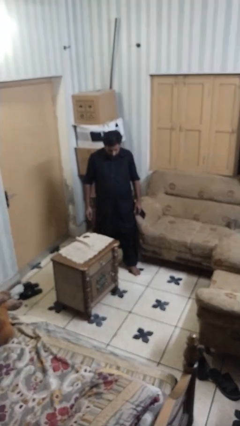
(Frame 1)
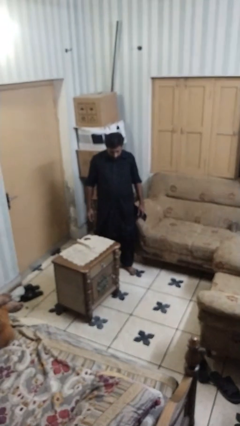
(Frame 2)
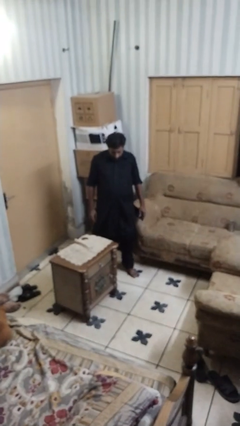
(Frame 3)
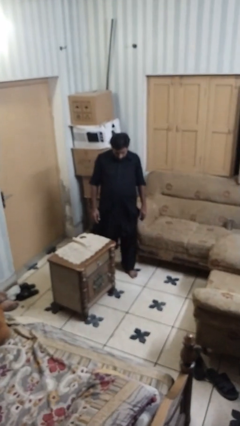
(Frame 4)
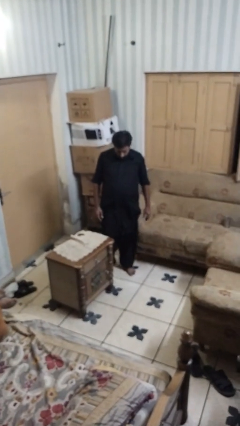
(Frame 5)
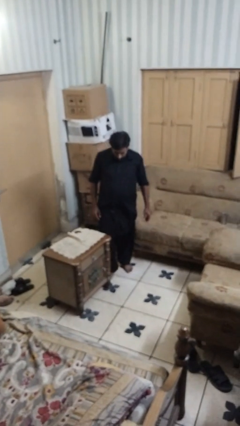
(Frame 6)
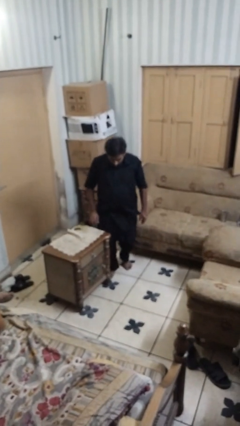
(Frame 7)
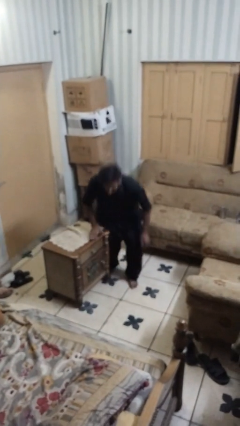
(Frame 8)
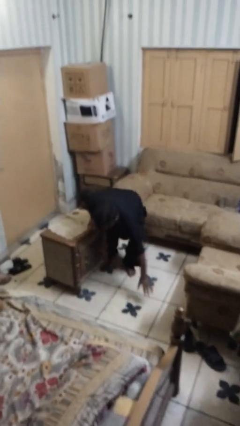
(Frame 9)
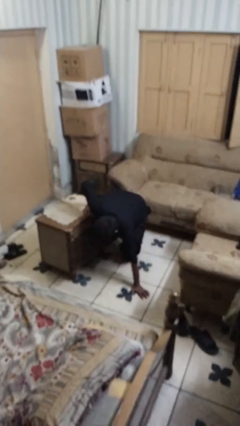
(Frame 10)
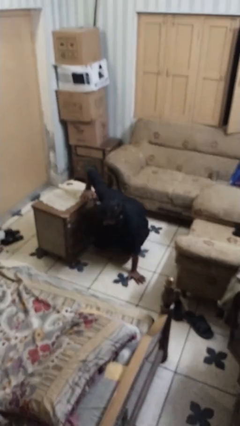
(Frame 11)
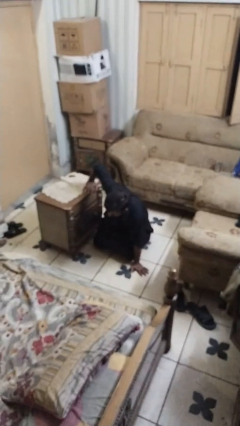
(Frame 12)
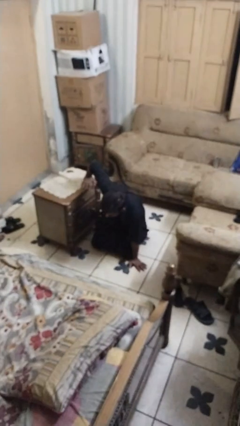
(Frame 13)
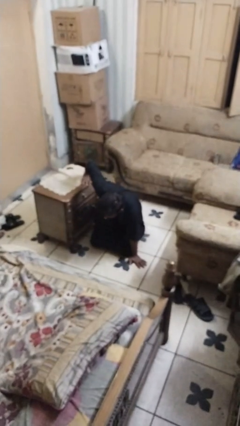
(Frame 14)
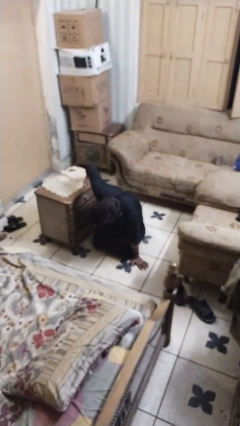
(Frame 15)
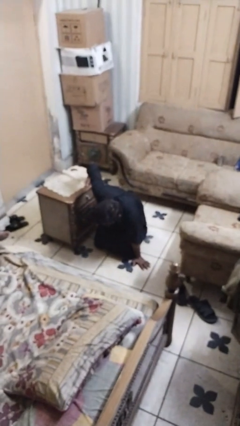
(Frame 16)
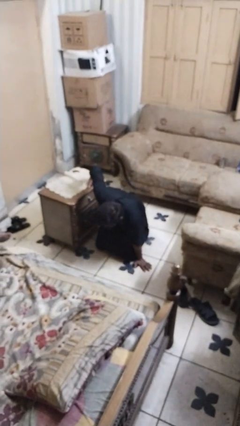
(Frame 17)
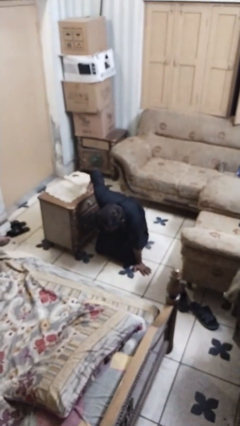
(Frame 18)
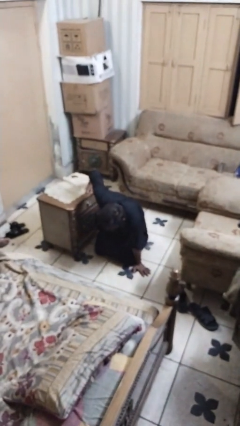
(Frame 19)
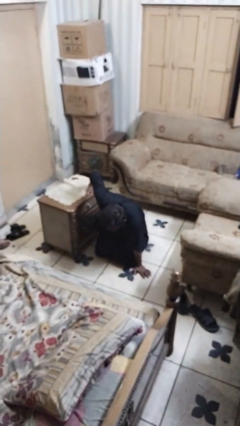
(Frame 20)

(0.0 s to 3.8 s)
person bumps into table

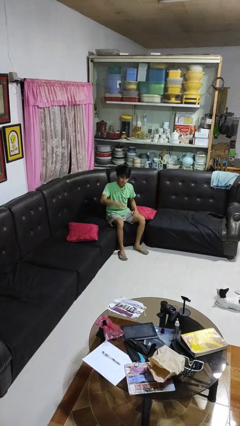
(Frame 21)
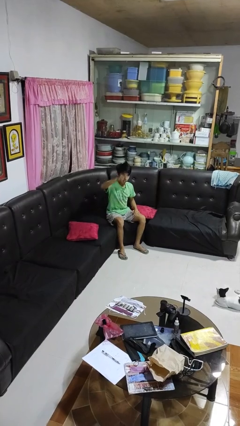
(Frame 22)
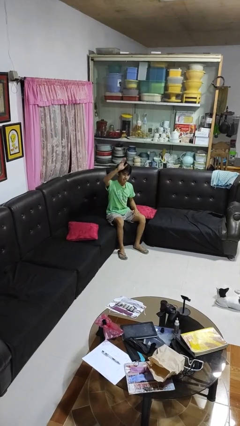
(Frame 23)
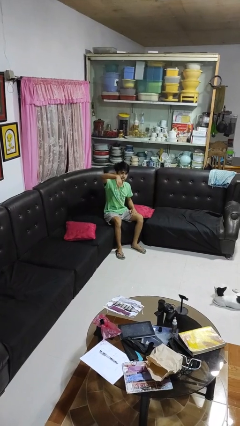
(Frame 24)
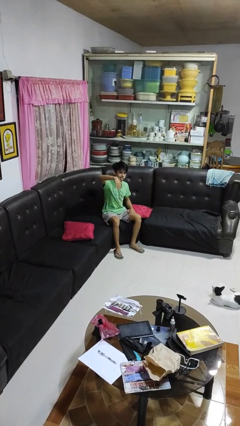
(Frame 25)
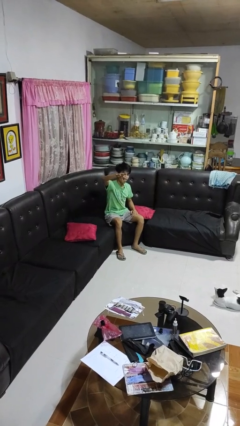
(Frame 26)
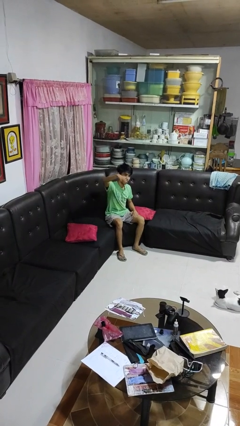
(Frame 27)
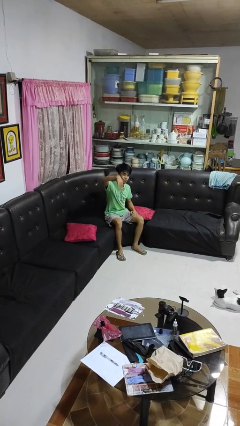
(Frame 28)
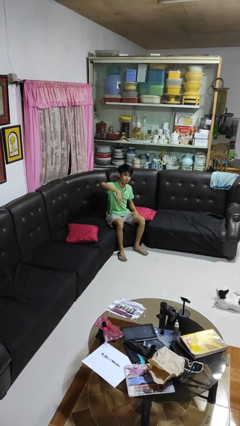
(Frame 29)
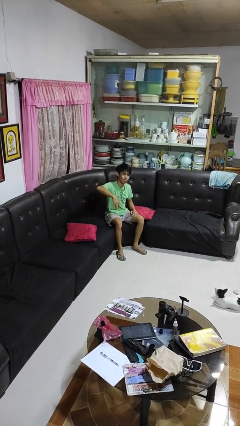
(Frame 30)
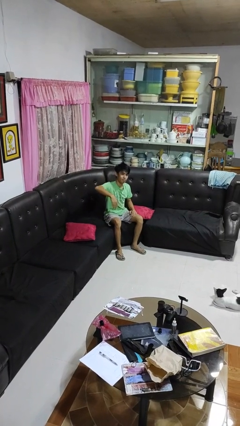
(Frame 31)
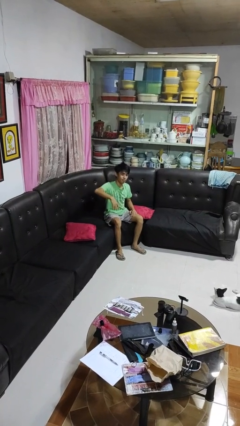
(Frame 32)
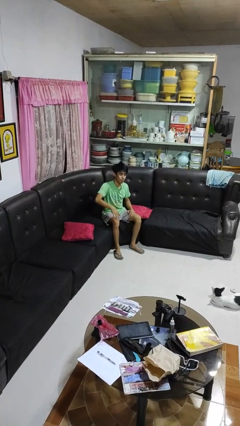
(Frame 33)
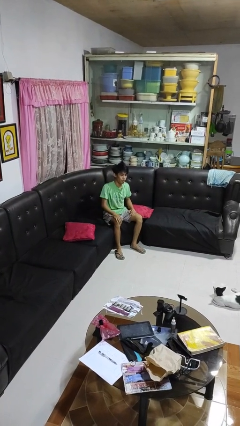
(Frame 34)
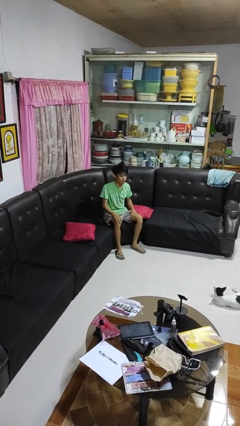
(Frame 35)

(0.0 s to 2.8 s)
person gestures come here

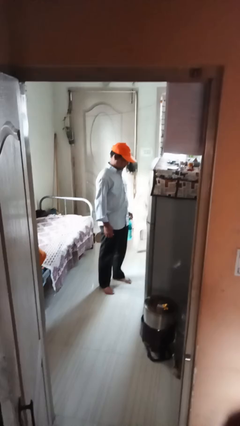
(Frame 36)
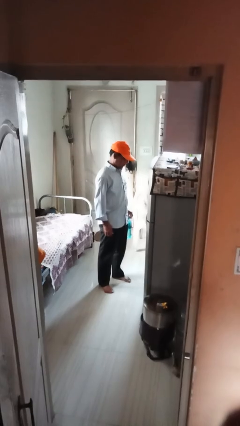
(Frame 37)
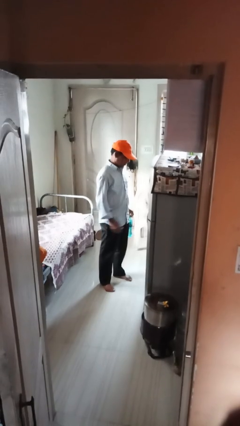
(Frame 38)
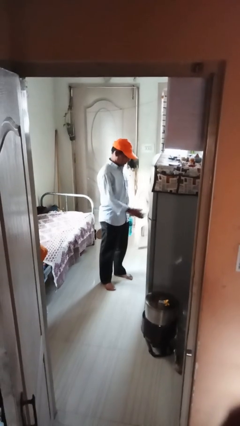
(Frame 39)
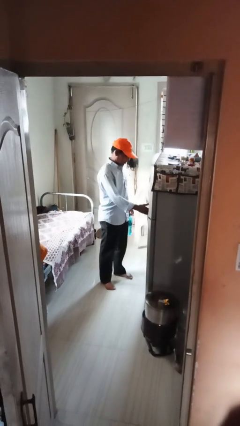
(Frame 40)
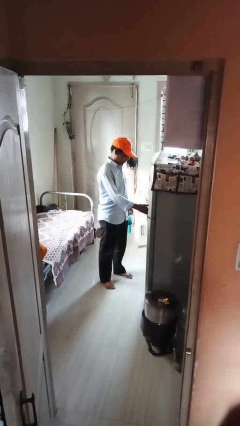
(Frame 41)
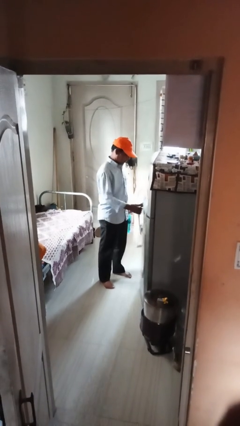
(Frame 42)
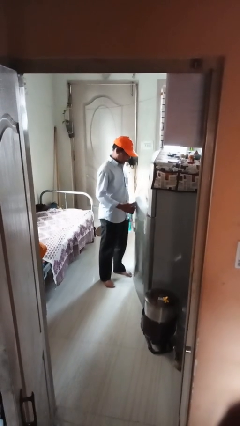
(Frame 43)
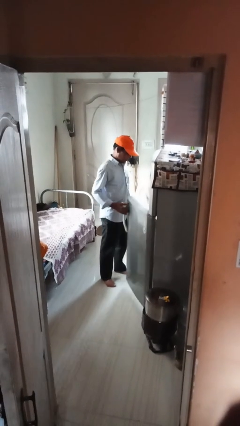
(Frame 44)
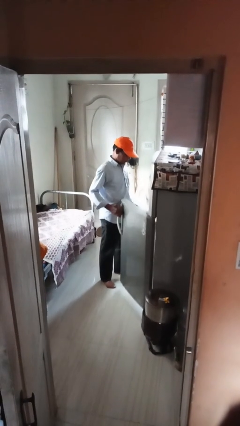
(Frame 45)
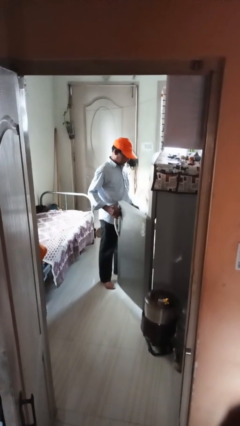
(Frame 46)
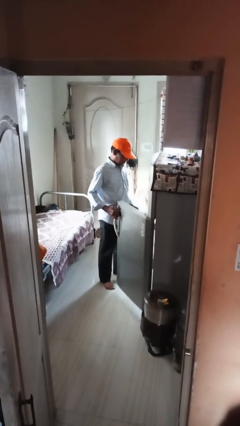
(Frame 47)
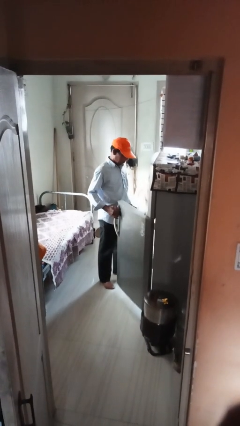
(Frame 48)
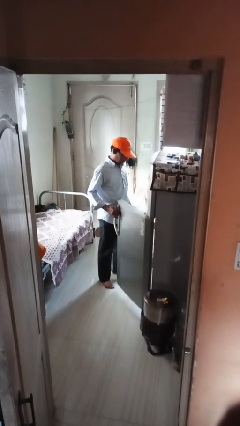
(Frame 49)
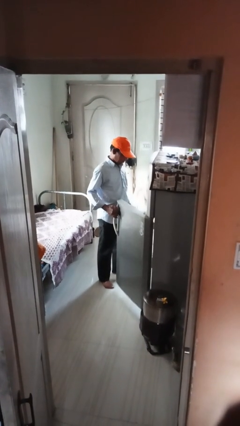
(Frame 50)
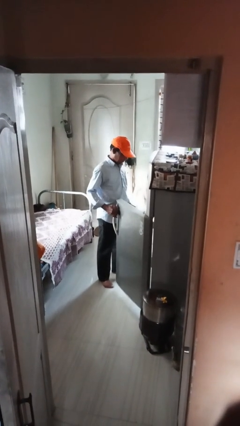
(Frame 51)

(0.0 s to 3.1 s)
person opens refrigerator

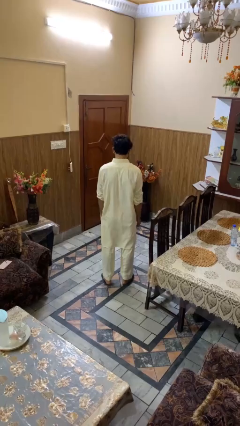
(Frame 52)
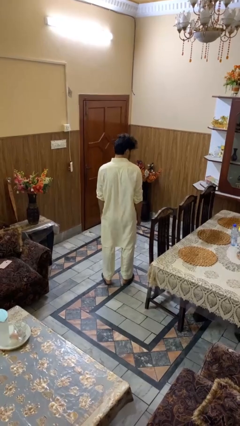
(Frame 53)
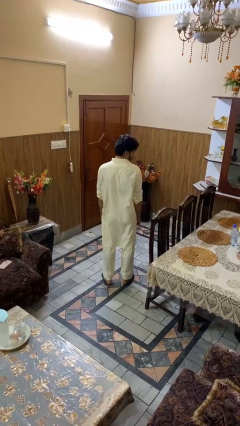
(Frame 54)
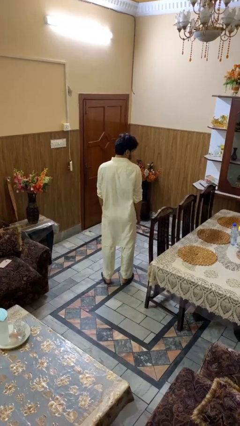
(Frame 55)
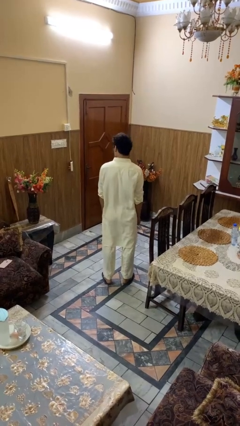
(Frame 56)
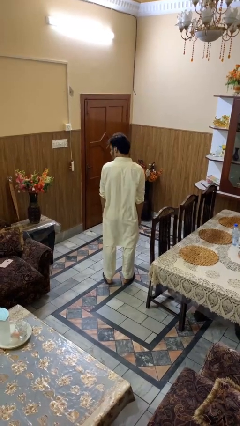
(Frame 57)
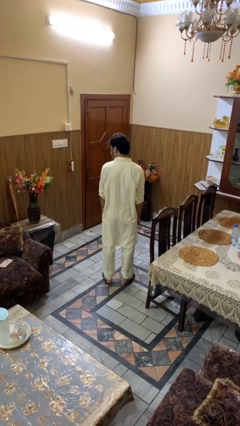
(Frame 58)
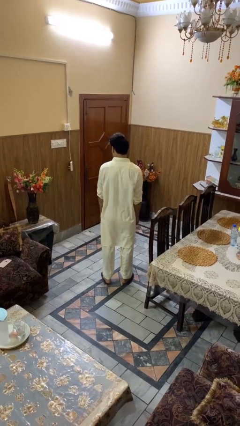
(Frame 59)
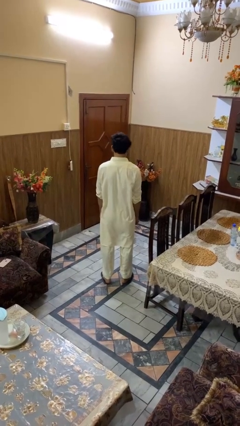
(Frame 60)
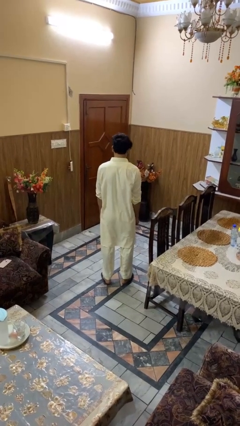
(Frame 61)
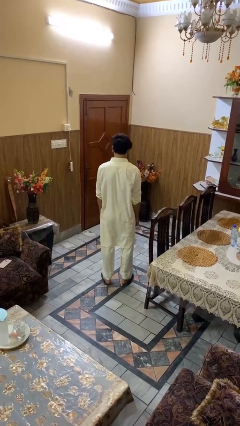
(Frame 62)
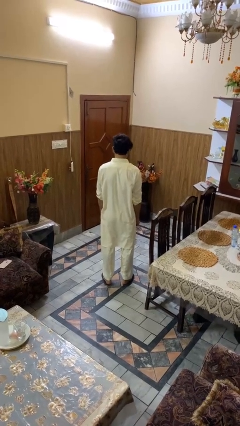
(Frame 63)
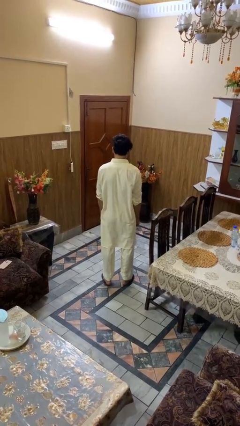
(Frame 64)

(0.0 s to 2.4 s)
person shakes head

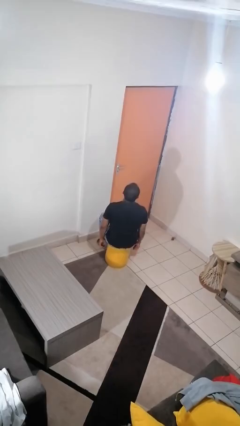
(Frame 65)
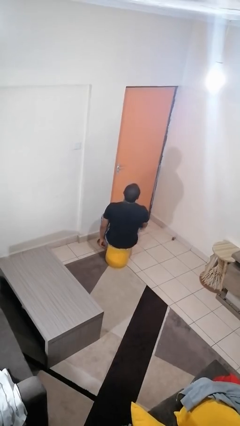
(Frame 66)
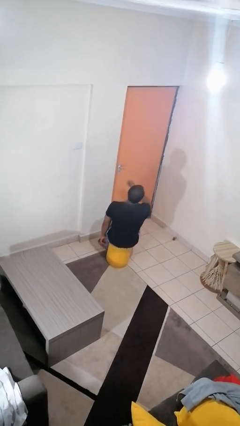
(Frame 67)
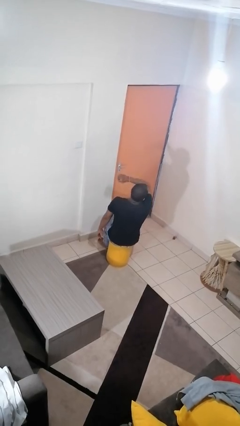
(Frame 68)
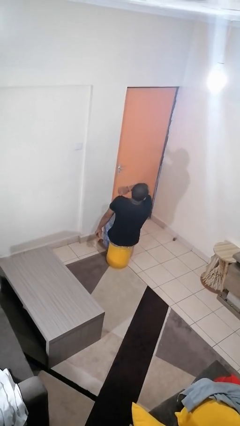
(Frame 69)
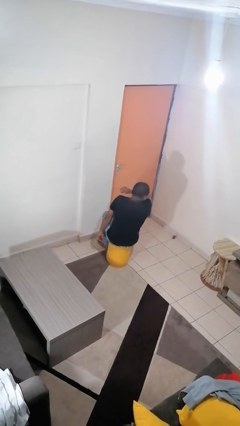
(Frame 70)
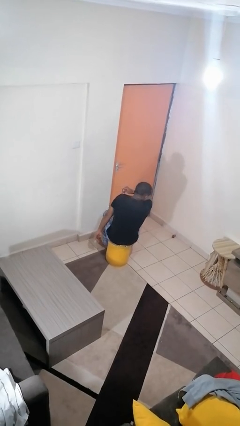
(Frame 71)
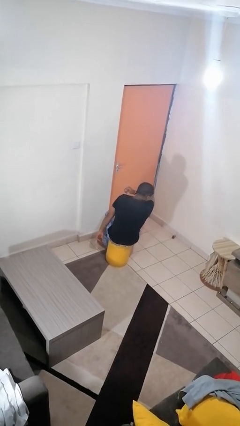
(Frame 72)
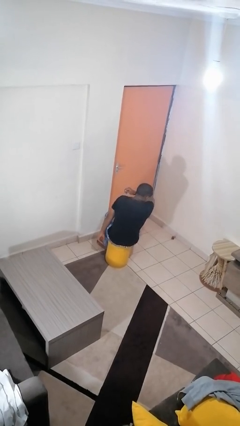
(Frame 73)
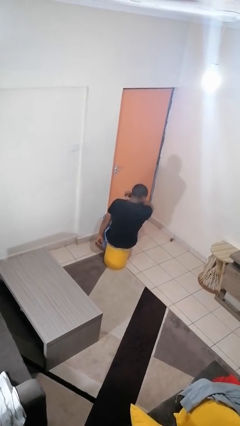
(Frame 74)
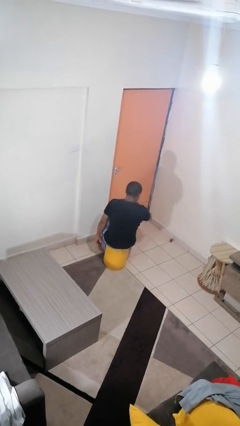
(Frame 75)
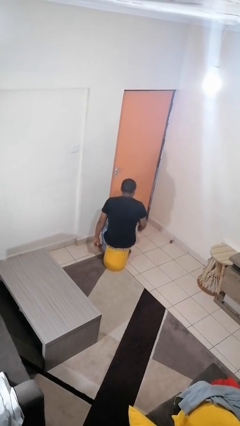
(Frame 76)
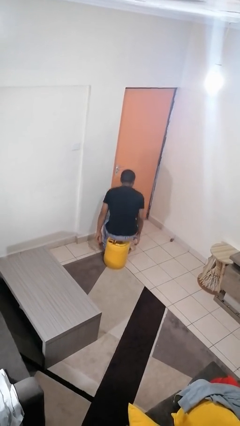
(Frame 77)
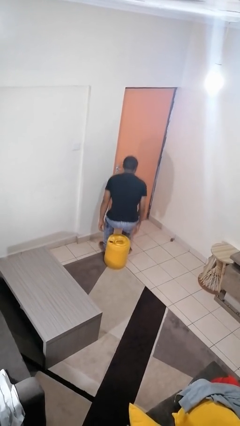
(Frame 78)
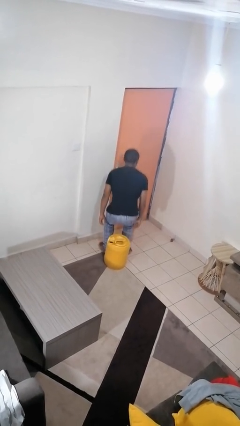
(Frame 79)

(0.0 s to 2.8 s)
person sneezes into arm

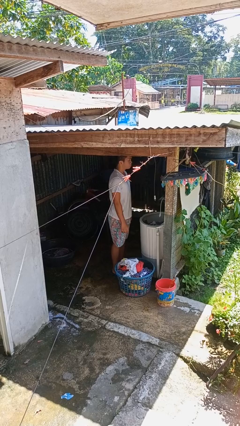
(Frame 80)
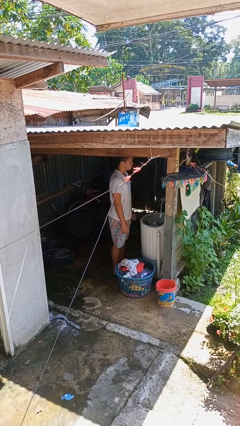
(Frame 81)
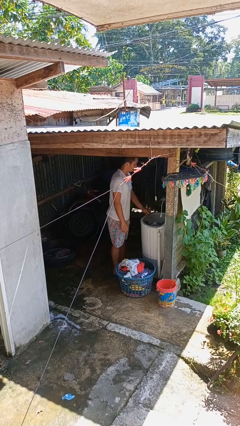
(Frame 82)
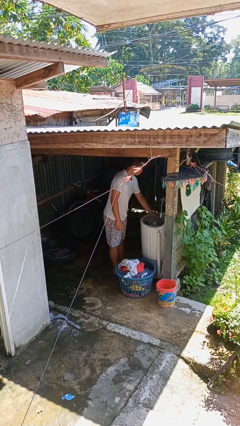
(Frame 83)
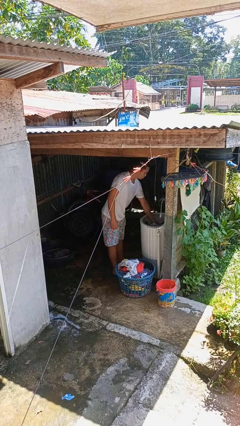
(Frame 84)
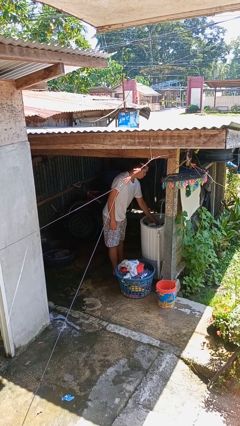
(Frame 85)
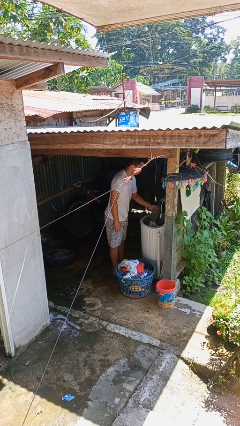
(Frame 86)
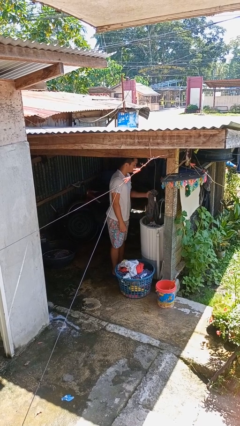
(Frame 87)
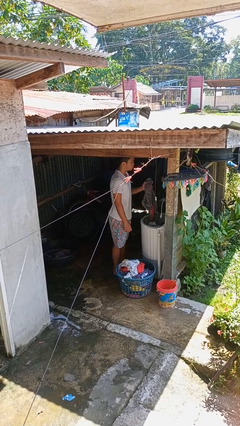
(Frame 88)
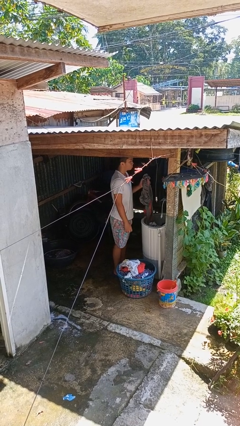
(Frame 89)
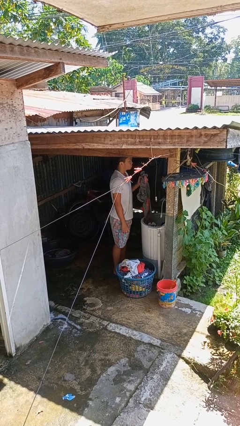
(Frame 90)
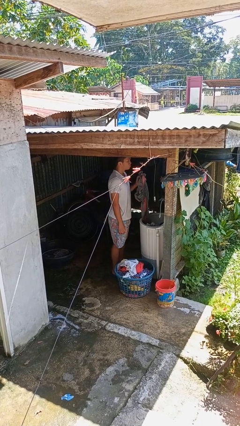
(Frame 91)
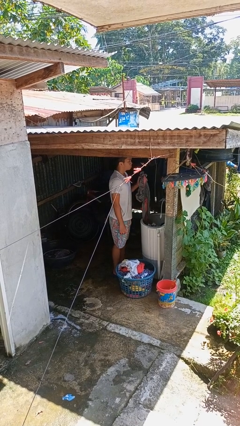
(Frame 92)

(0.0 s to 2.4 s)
person unloads clotheswasher

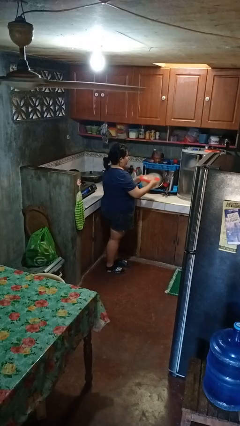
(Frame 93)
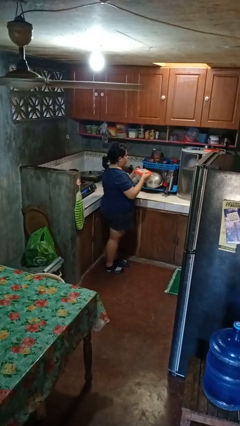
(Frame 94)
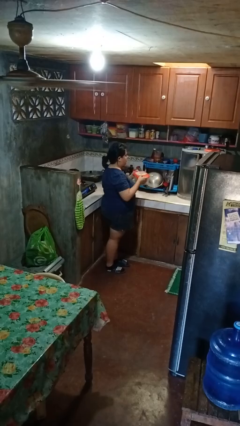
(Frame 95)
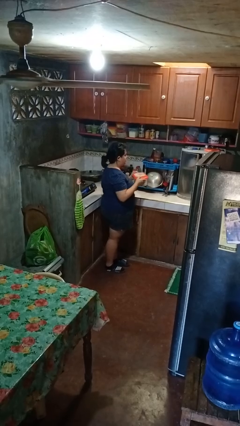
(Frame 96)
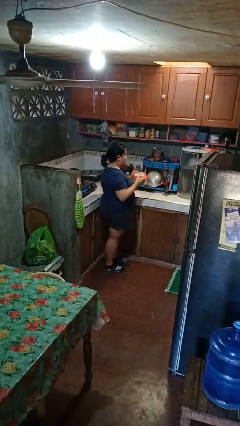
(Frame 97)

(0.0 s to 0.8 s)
person picks up object from countertop
